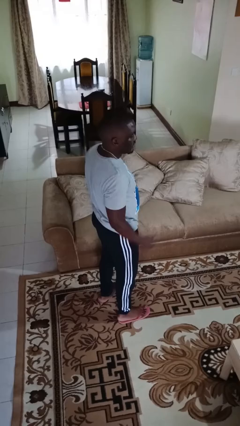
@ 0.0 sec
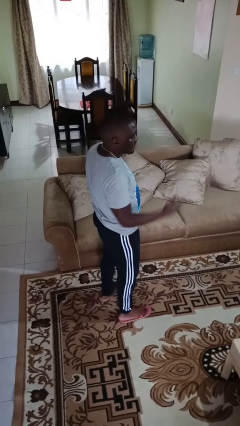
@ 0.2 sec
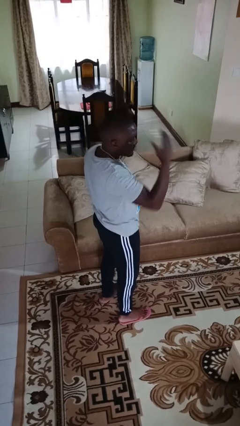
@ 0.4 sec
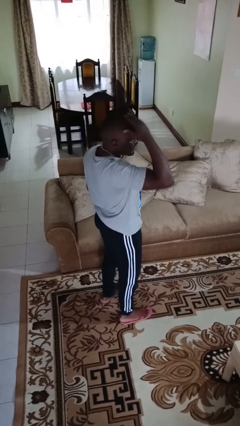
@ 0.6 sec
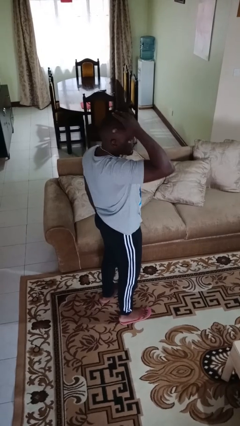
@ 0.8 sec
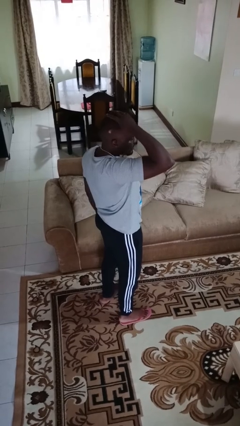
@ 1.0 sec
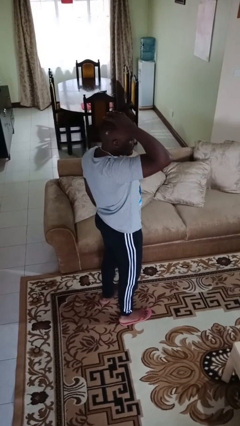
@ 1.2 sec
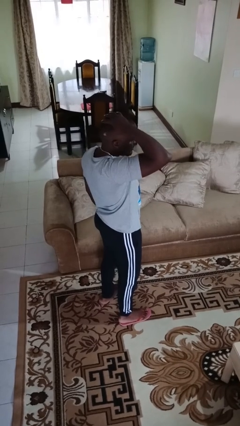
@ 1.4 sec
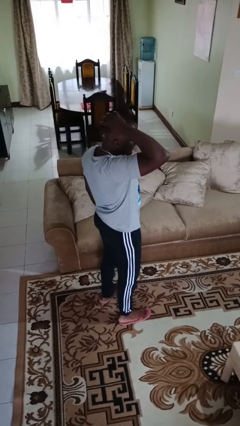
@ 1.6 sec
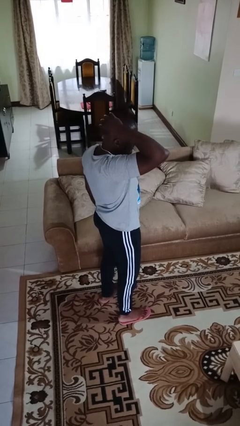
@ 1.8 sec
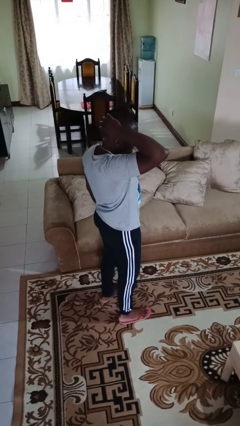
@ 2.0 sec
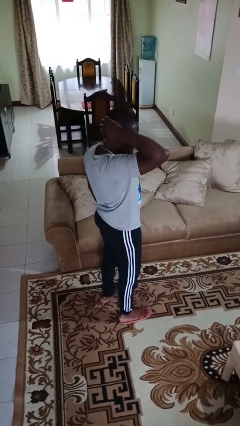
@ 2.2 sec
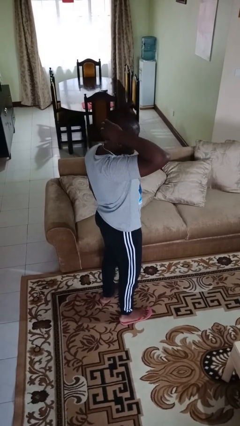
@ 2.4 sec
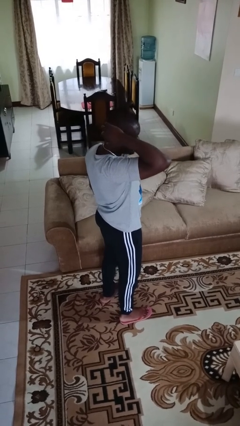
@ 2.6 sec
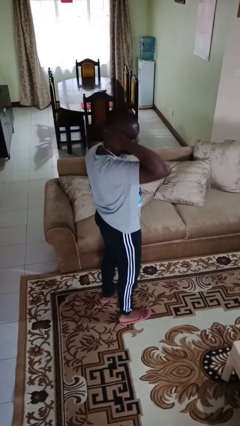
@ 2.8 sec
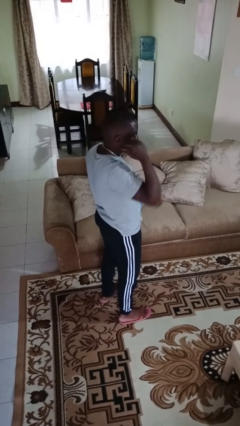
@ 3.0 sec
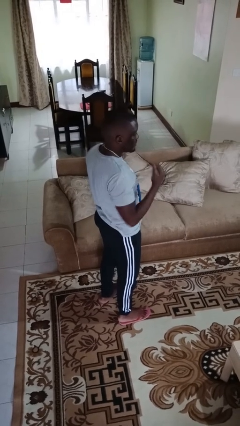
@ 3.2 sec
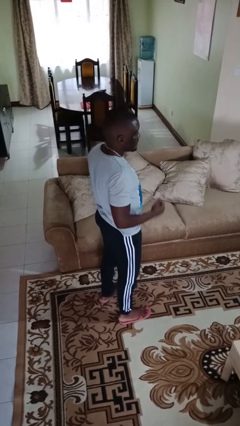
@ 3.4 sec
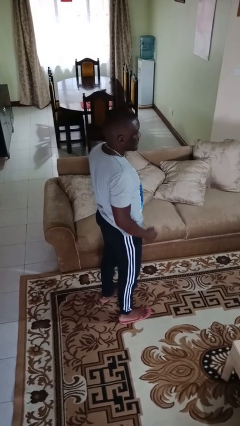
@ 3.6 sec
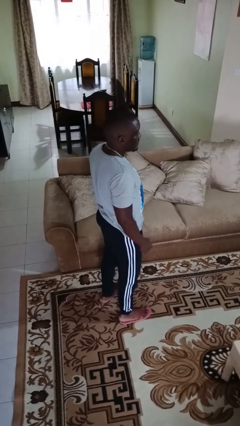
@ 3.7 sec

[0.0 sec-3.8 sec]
person strokes hair

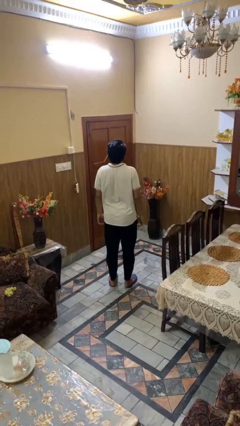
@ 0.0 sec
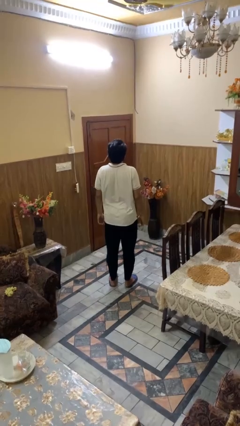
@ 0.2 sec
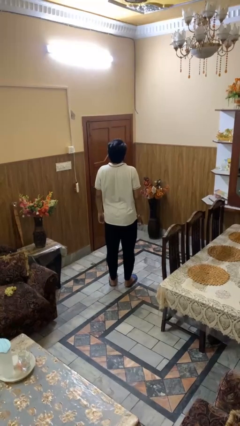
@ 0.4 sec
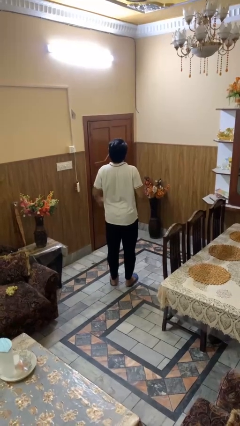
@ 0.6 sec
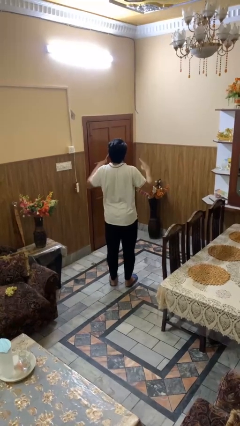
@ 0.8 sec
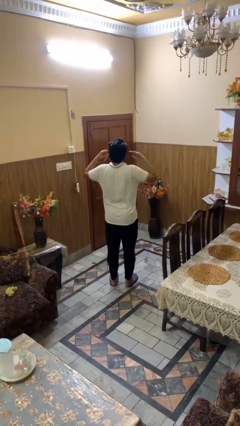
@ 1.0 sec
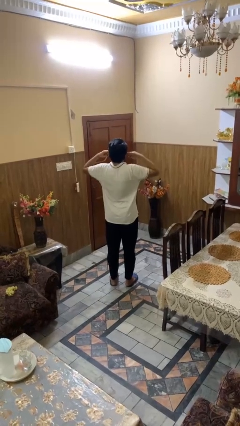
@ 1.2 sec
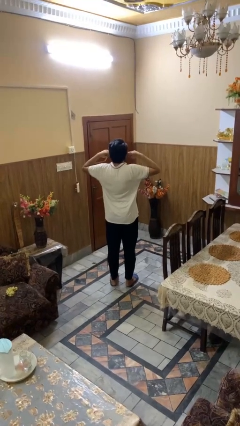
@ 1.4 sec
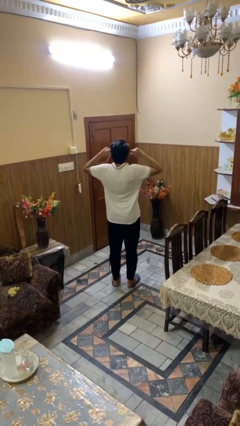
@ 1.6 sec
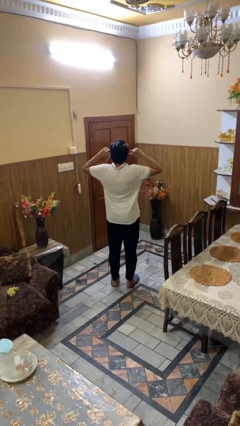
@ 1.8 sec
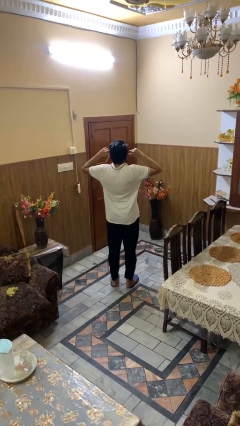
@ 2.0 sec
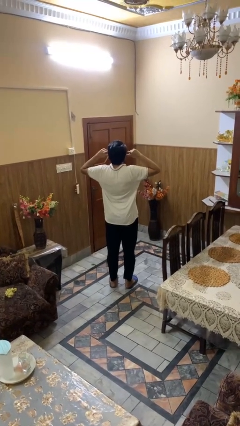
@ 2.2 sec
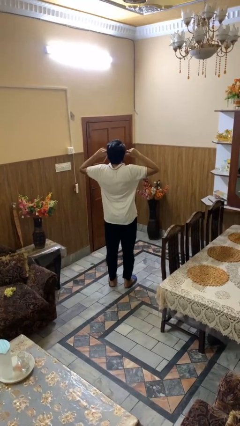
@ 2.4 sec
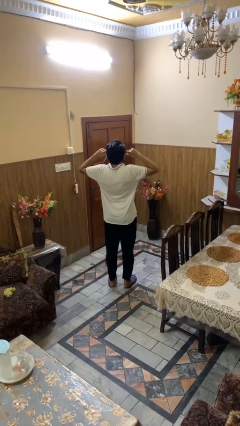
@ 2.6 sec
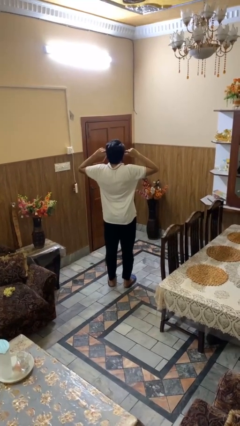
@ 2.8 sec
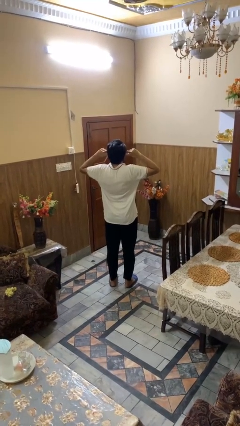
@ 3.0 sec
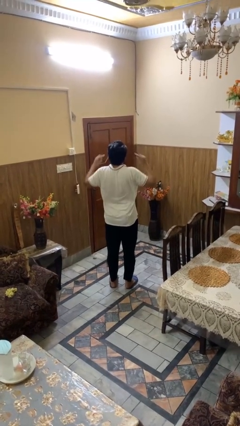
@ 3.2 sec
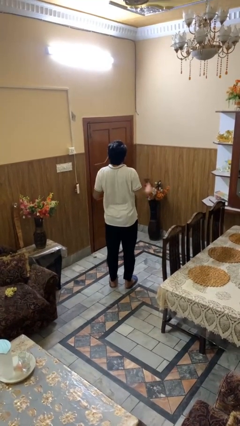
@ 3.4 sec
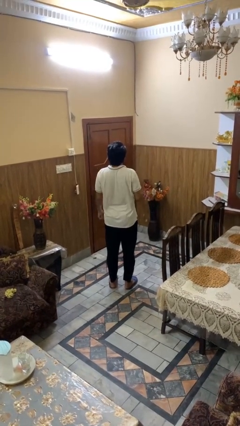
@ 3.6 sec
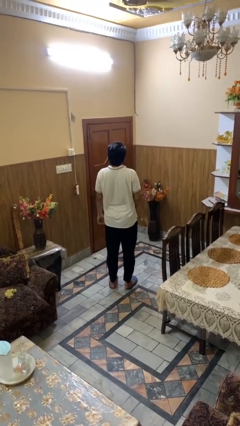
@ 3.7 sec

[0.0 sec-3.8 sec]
person puts fingers in ear

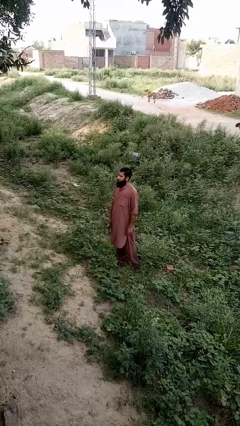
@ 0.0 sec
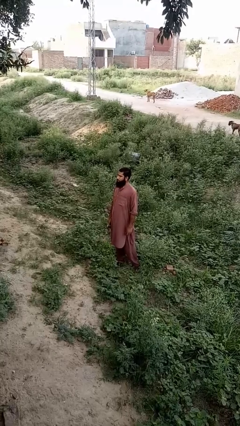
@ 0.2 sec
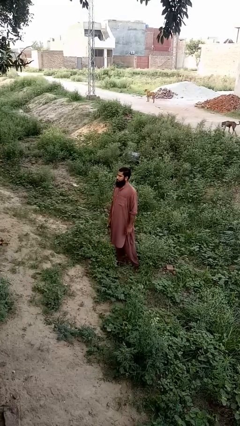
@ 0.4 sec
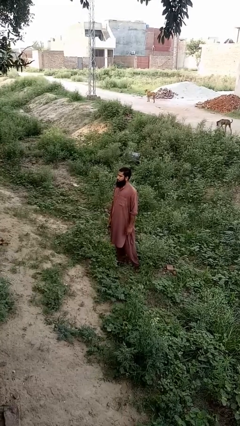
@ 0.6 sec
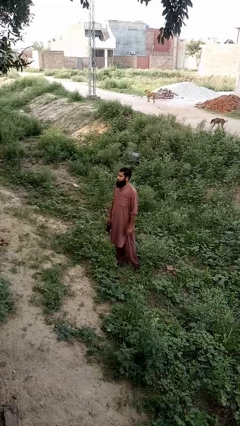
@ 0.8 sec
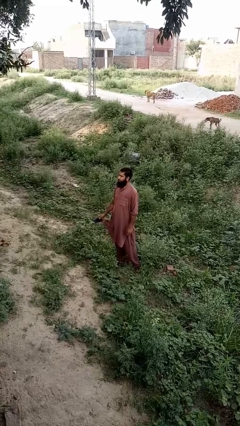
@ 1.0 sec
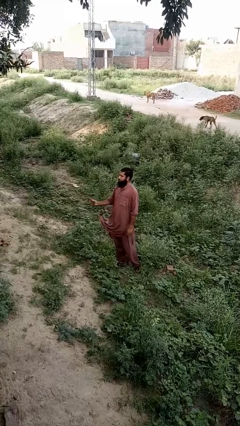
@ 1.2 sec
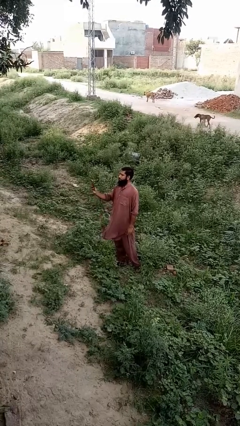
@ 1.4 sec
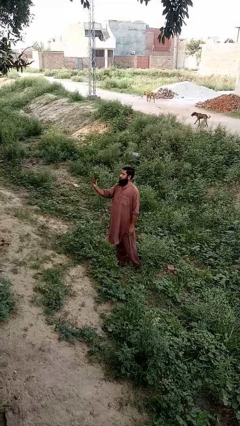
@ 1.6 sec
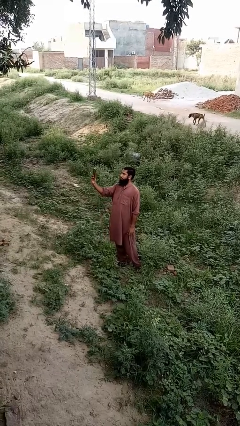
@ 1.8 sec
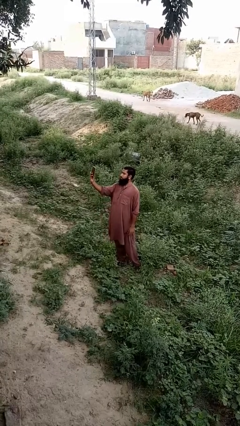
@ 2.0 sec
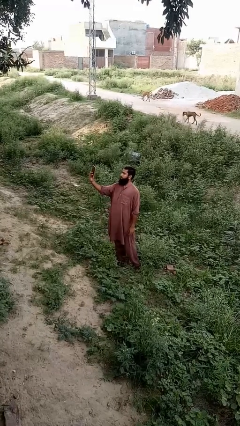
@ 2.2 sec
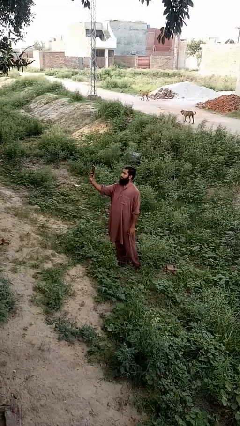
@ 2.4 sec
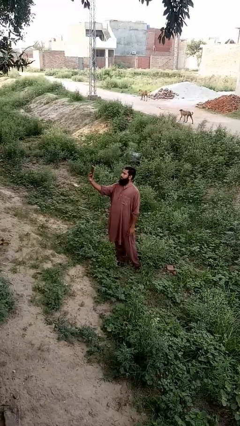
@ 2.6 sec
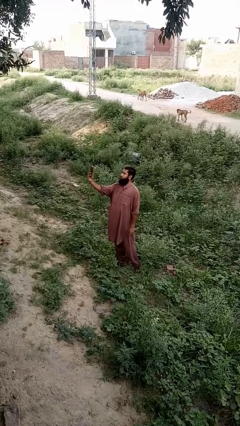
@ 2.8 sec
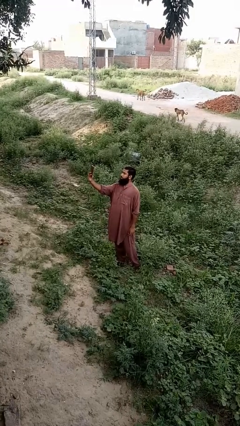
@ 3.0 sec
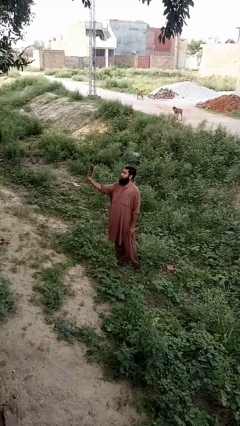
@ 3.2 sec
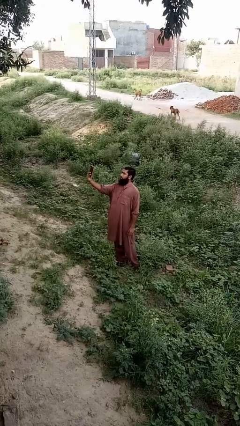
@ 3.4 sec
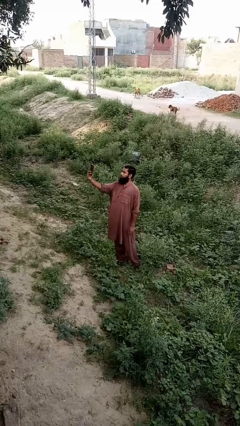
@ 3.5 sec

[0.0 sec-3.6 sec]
person takes selfie

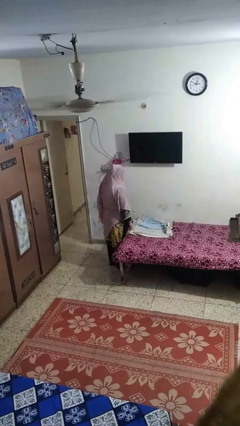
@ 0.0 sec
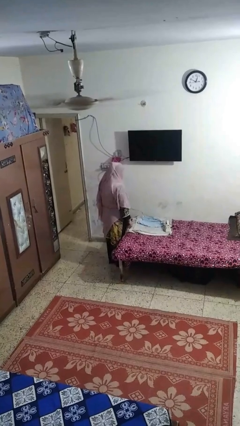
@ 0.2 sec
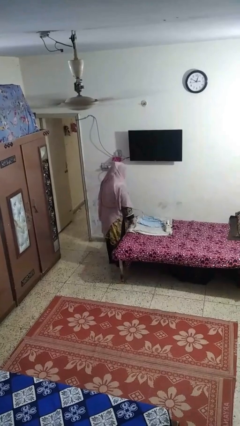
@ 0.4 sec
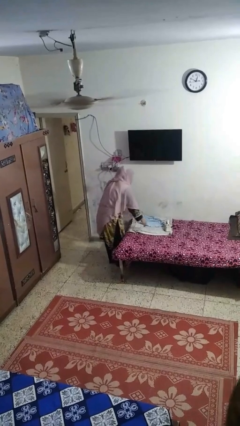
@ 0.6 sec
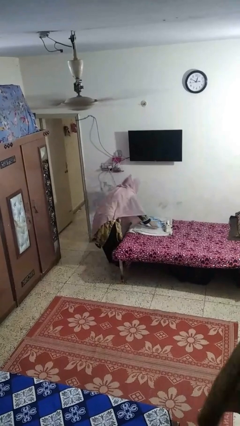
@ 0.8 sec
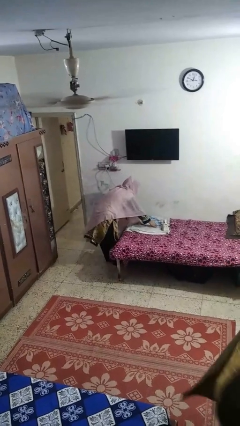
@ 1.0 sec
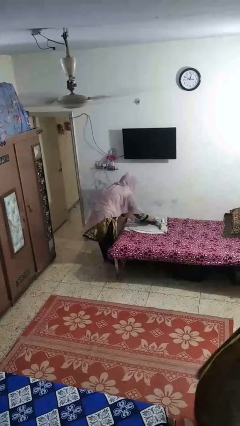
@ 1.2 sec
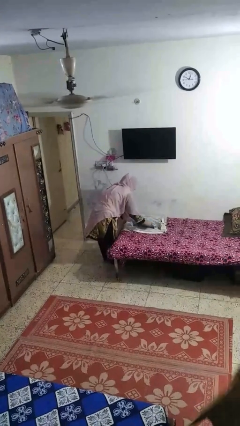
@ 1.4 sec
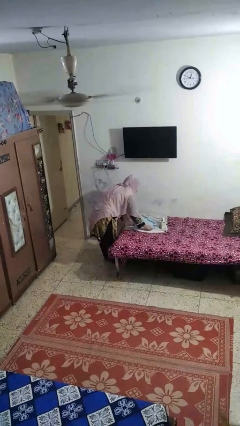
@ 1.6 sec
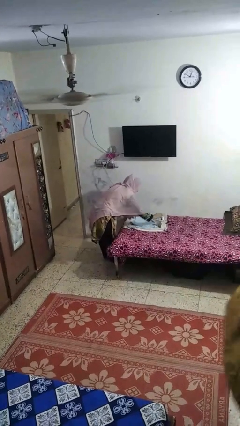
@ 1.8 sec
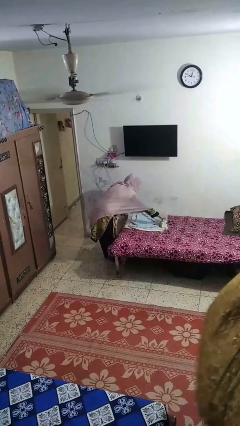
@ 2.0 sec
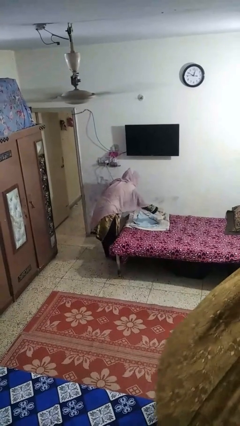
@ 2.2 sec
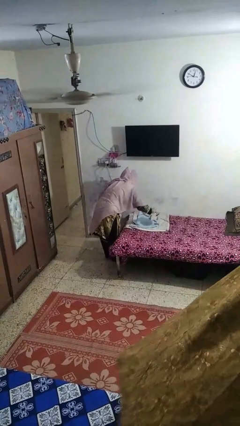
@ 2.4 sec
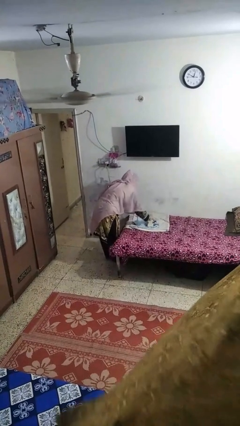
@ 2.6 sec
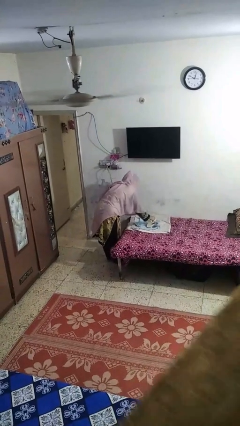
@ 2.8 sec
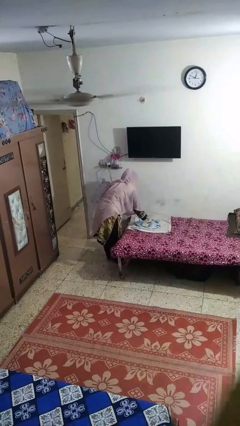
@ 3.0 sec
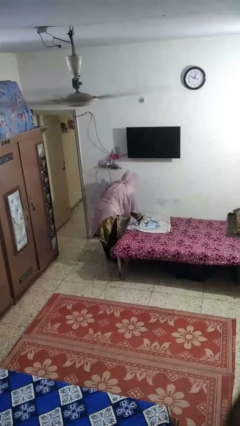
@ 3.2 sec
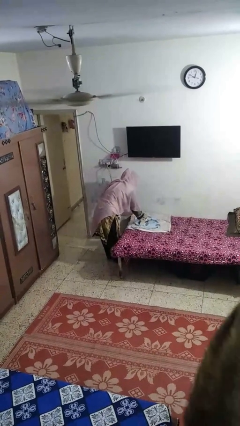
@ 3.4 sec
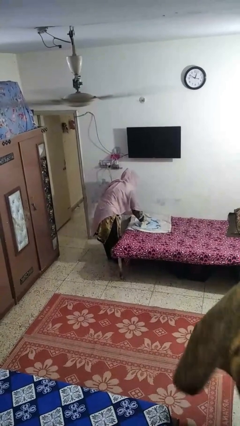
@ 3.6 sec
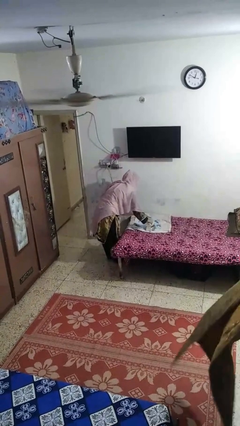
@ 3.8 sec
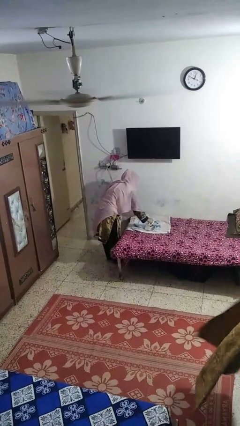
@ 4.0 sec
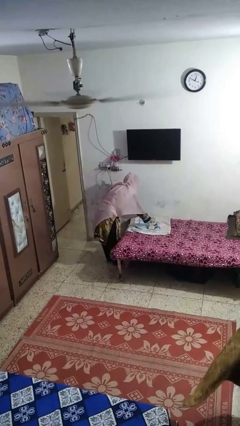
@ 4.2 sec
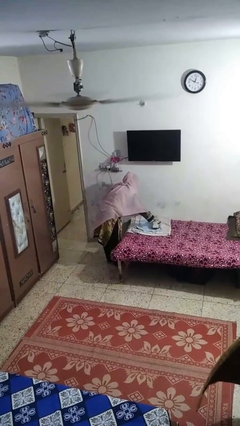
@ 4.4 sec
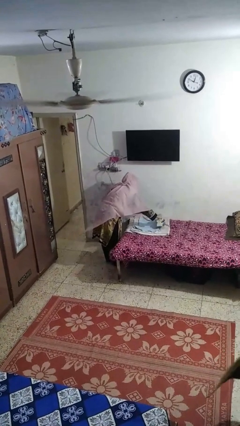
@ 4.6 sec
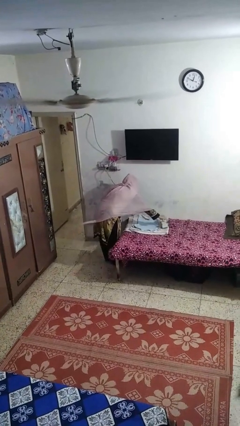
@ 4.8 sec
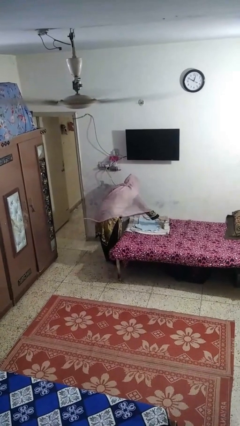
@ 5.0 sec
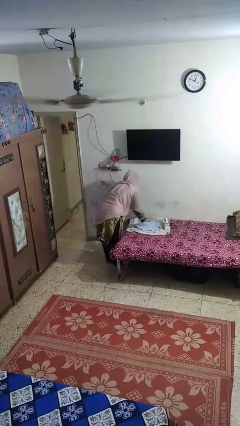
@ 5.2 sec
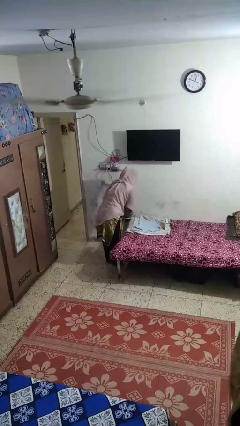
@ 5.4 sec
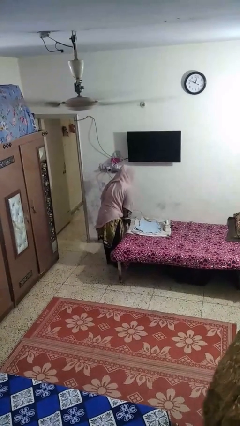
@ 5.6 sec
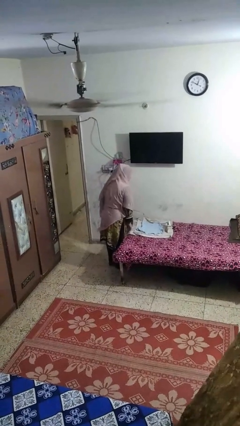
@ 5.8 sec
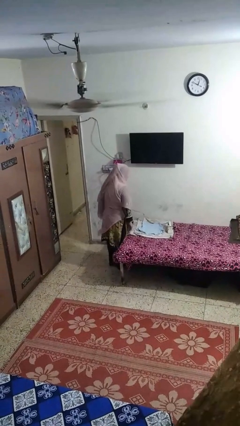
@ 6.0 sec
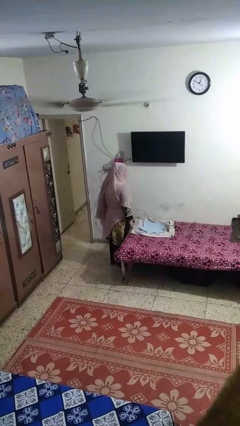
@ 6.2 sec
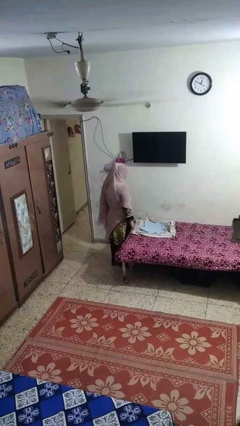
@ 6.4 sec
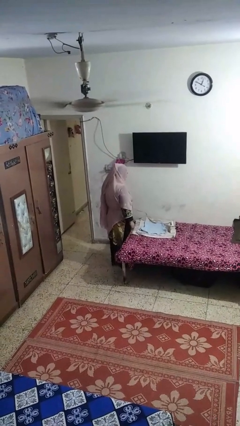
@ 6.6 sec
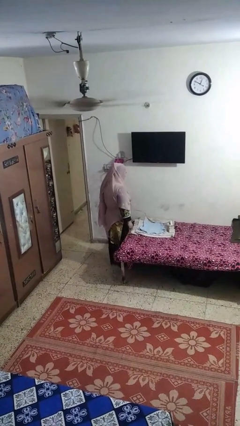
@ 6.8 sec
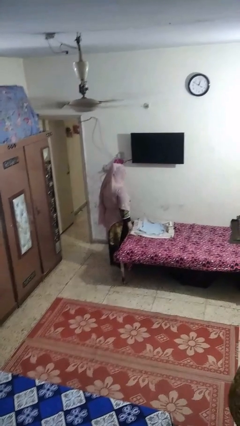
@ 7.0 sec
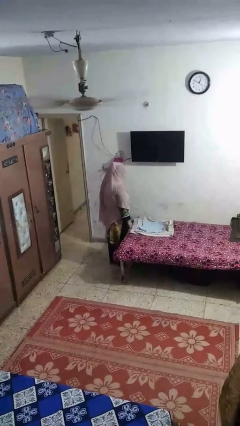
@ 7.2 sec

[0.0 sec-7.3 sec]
person irons clothes
